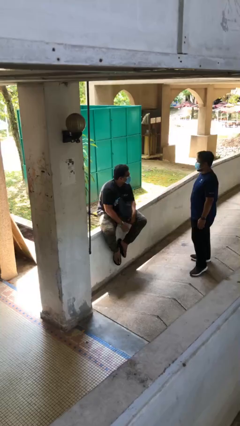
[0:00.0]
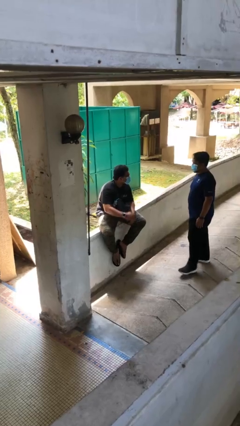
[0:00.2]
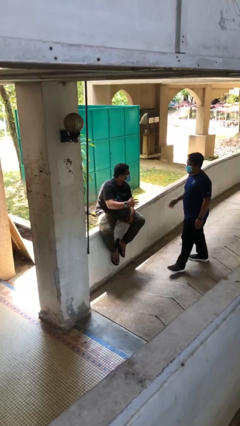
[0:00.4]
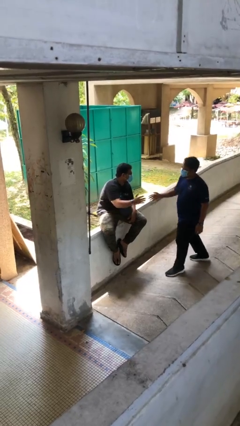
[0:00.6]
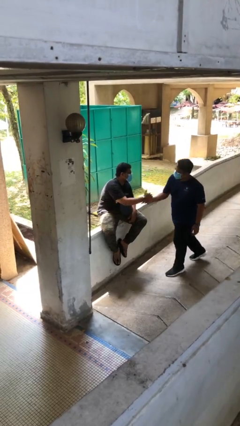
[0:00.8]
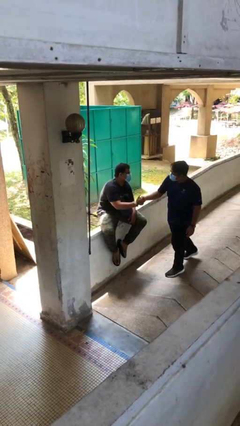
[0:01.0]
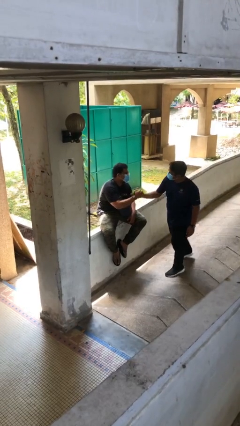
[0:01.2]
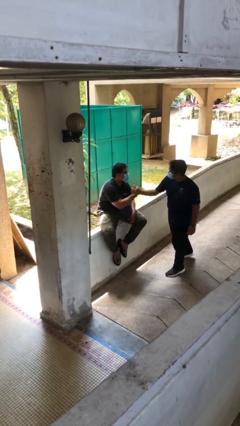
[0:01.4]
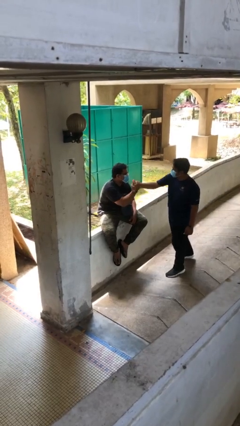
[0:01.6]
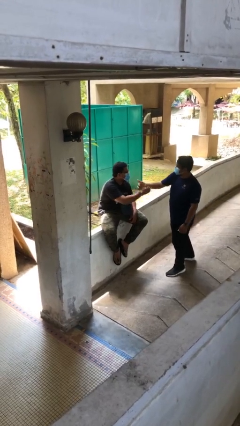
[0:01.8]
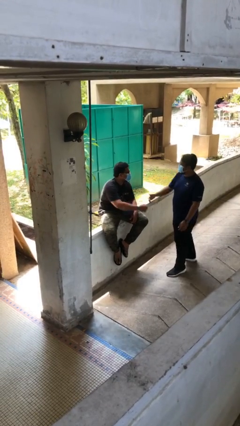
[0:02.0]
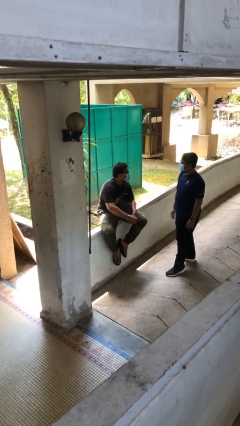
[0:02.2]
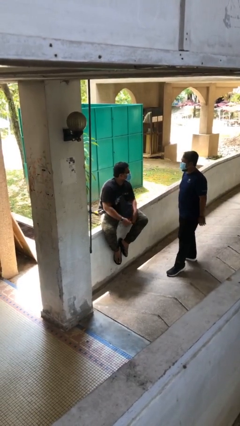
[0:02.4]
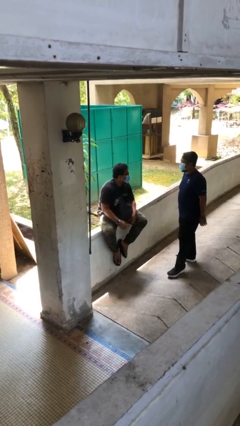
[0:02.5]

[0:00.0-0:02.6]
person shakes hand

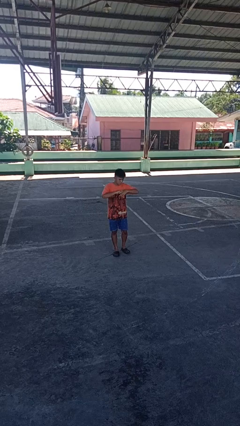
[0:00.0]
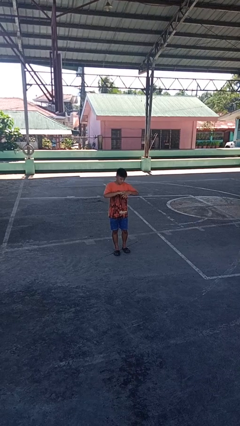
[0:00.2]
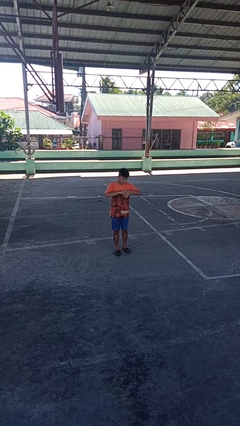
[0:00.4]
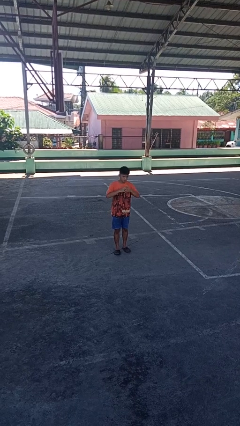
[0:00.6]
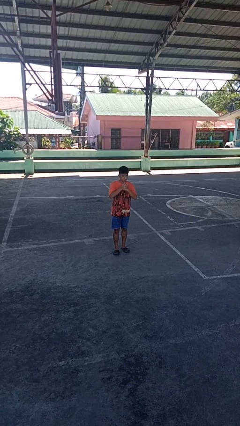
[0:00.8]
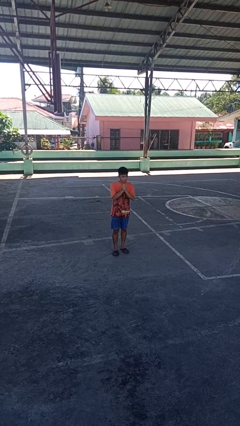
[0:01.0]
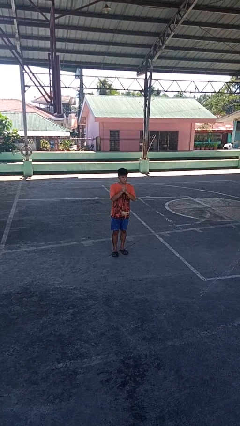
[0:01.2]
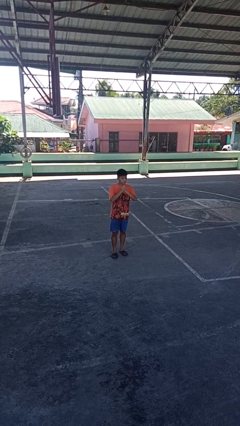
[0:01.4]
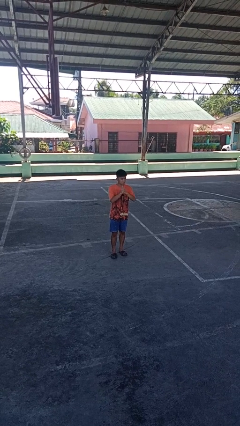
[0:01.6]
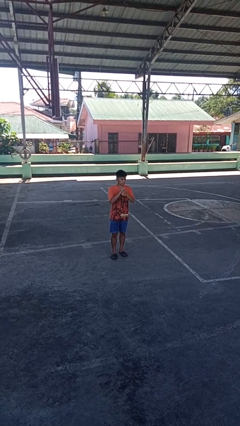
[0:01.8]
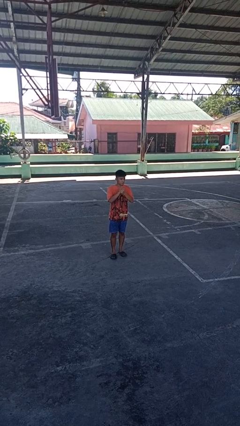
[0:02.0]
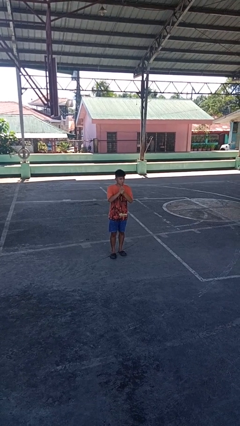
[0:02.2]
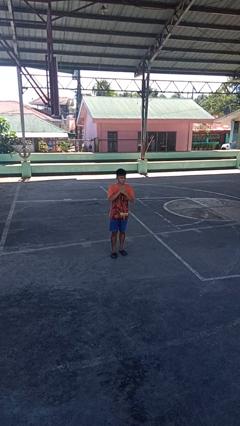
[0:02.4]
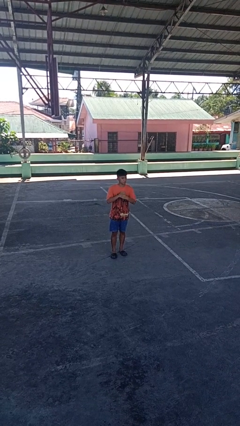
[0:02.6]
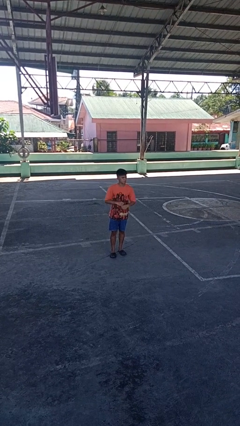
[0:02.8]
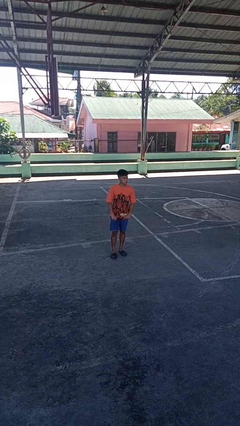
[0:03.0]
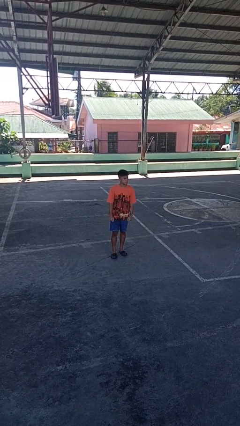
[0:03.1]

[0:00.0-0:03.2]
person cracks knuckles

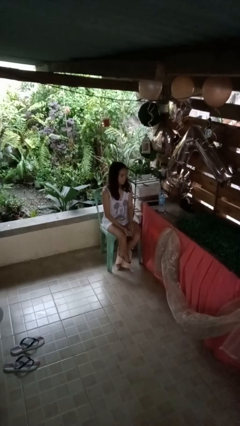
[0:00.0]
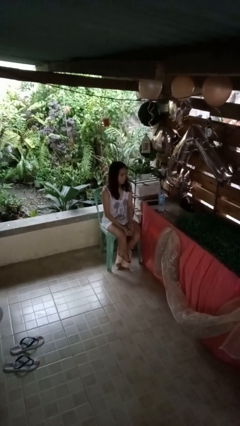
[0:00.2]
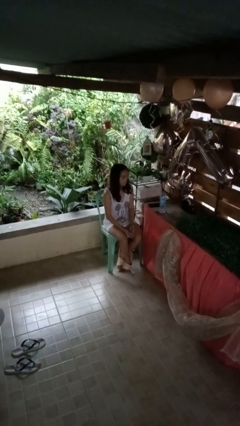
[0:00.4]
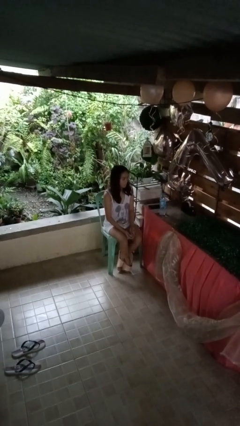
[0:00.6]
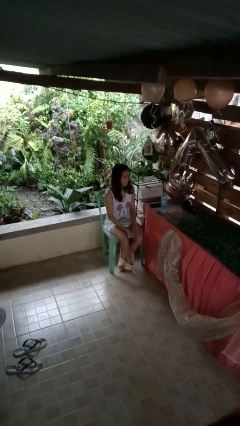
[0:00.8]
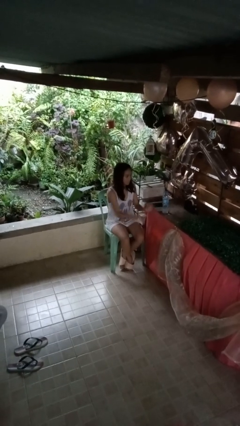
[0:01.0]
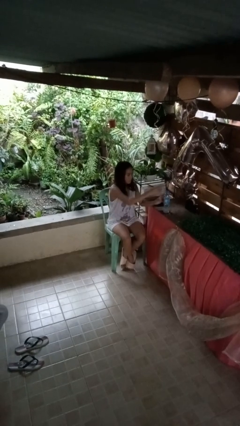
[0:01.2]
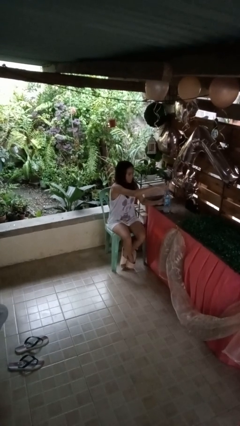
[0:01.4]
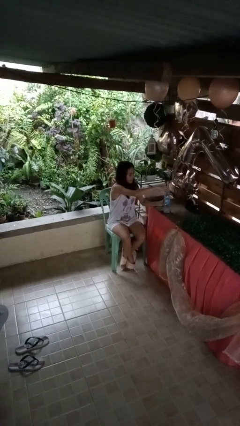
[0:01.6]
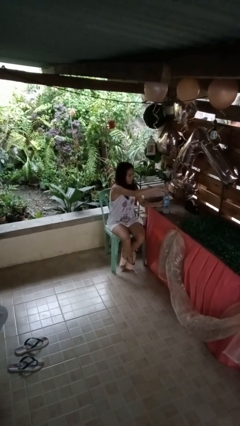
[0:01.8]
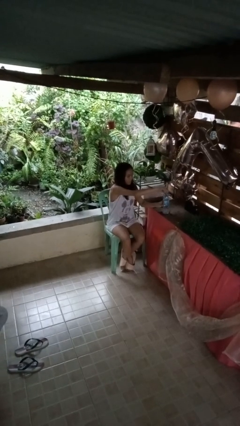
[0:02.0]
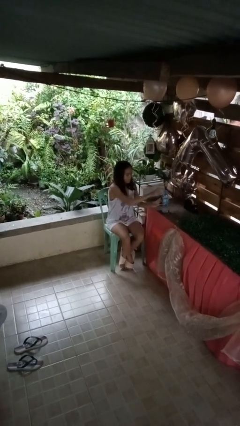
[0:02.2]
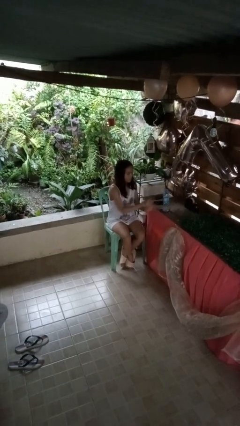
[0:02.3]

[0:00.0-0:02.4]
person screws lid to bottle

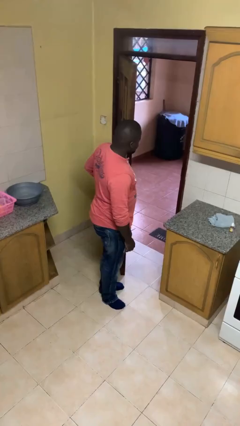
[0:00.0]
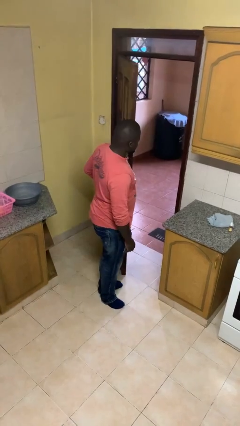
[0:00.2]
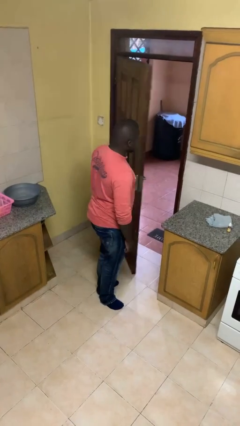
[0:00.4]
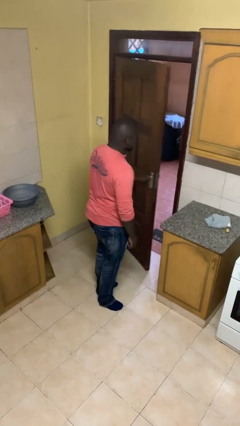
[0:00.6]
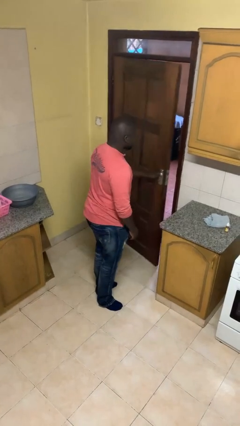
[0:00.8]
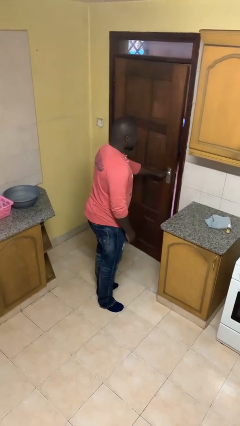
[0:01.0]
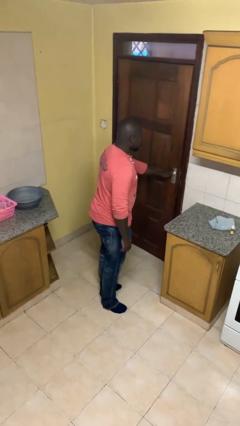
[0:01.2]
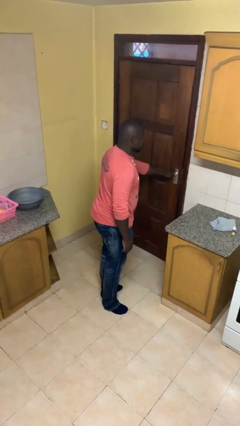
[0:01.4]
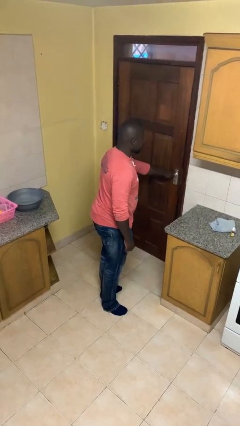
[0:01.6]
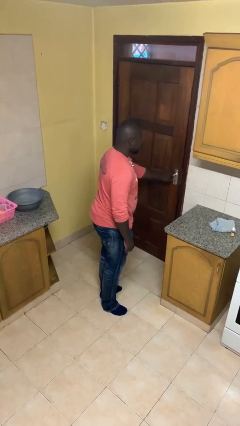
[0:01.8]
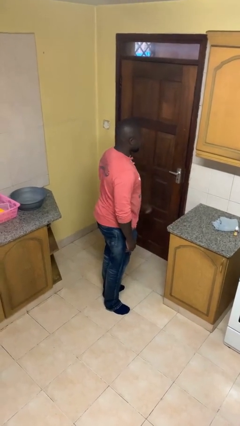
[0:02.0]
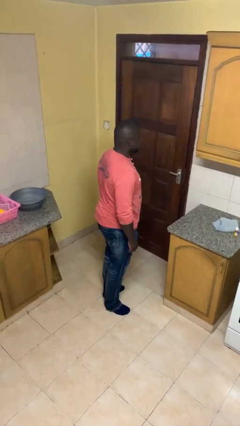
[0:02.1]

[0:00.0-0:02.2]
person closes facility door

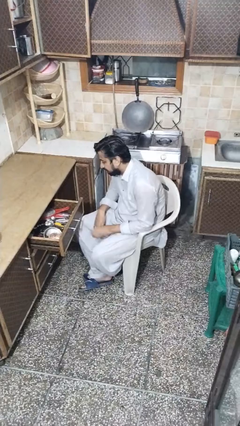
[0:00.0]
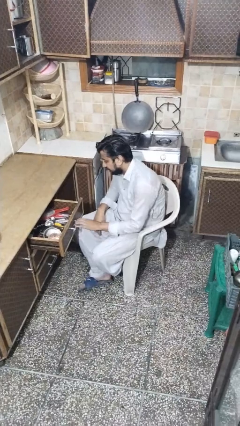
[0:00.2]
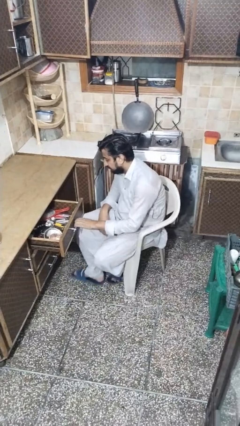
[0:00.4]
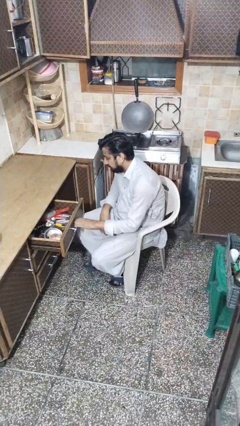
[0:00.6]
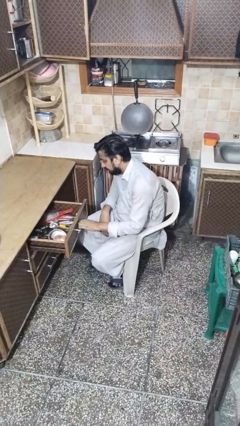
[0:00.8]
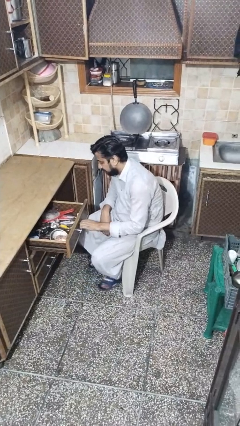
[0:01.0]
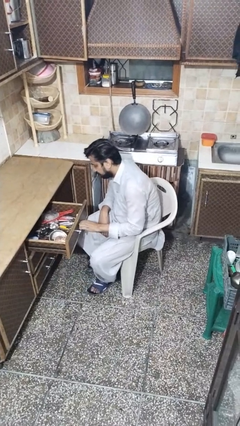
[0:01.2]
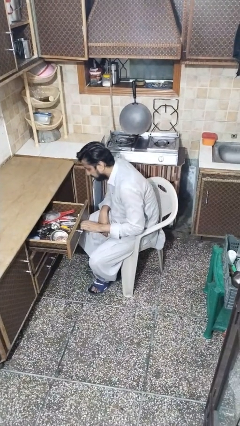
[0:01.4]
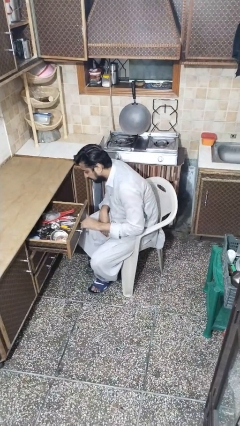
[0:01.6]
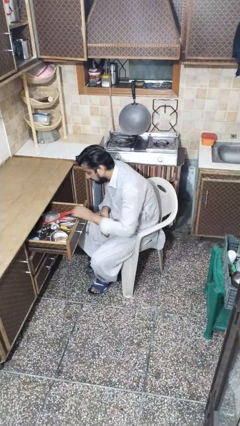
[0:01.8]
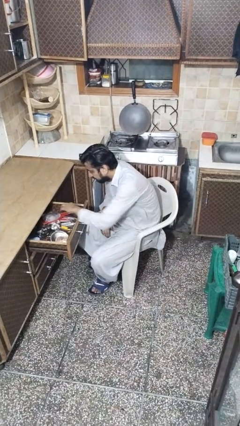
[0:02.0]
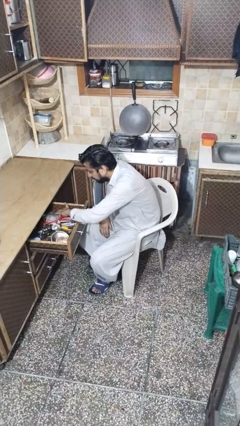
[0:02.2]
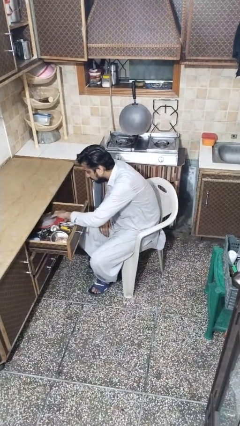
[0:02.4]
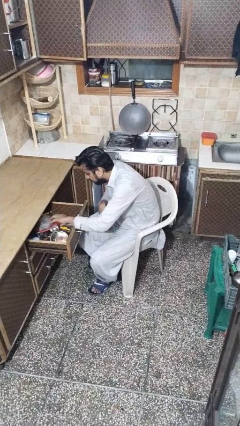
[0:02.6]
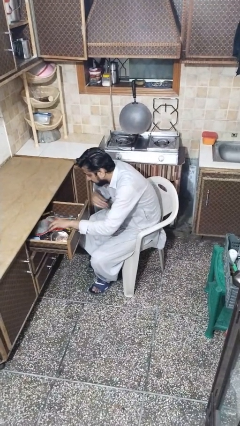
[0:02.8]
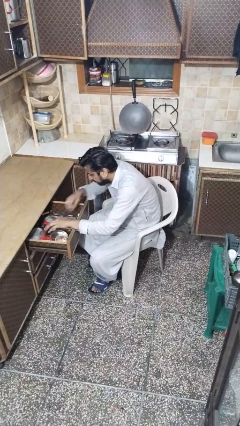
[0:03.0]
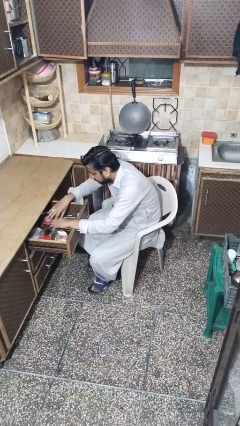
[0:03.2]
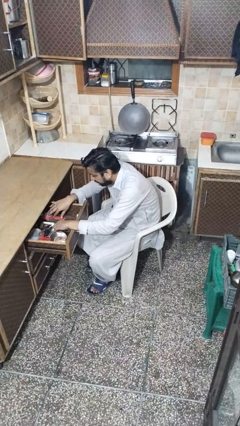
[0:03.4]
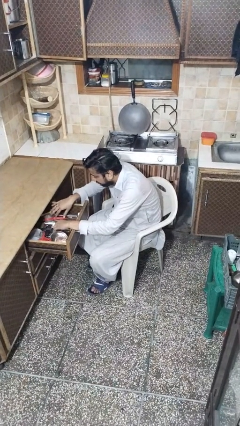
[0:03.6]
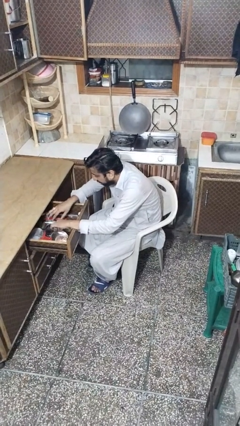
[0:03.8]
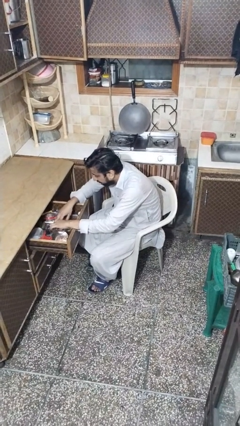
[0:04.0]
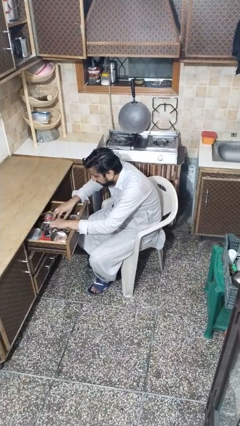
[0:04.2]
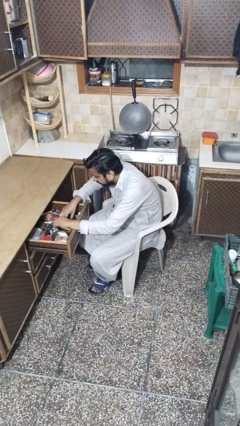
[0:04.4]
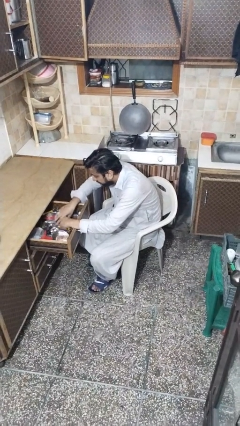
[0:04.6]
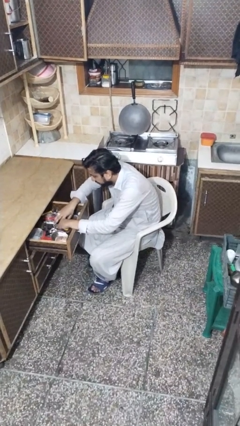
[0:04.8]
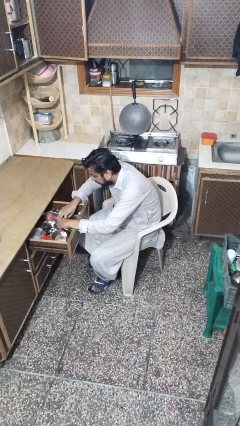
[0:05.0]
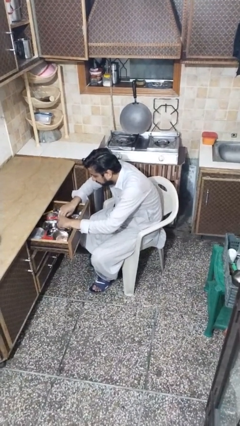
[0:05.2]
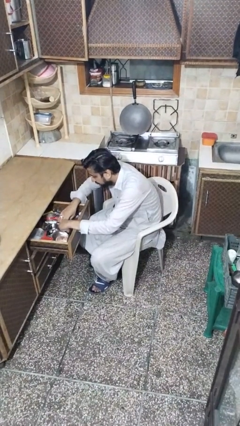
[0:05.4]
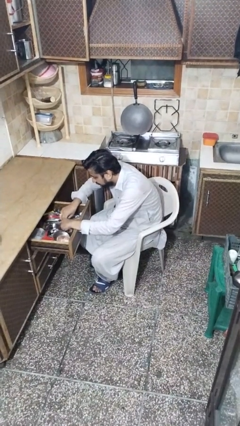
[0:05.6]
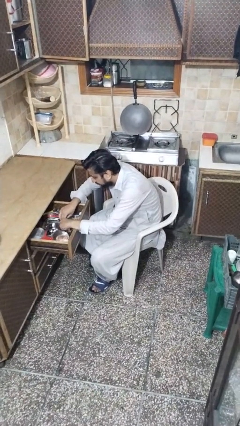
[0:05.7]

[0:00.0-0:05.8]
person searches in kitchen drawer

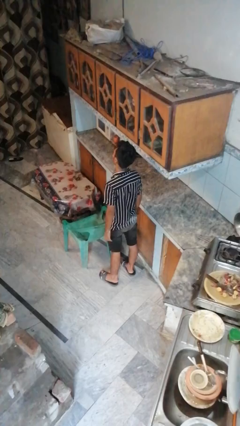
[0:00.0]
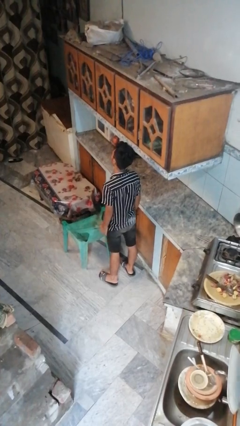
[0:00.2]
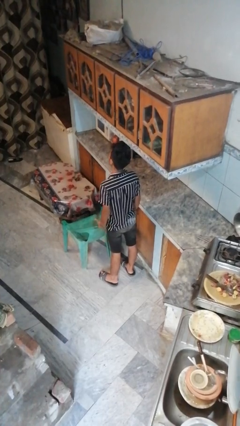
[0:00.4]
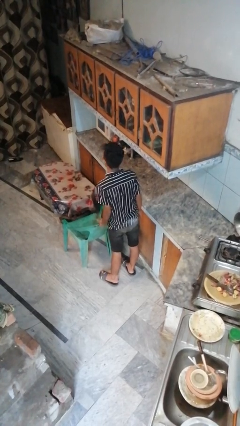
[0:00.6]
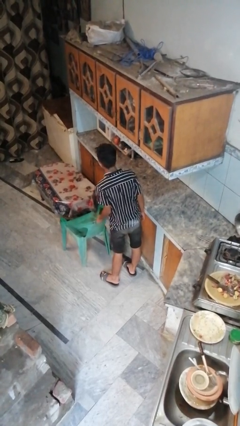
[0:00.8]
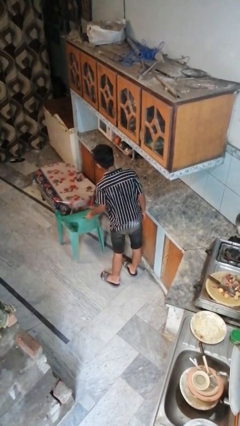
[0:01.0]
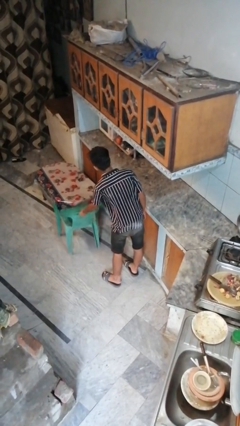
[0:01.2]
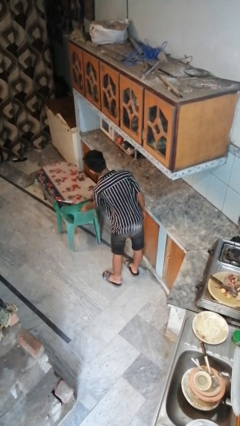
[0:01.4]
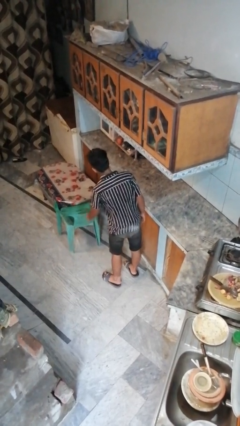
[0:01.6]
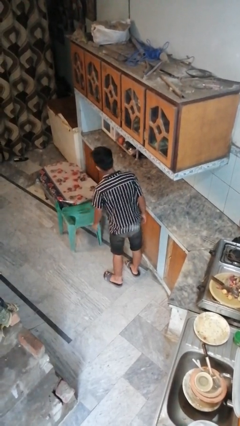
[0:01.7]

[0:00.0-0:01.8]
person pushes in chair
